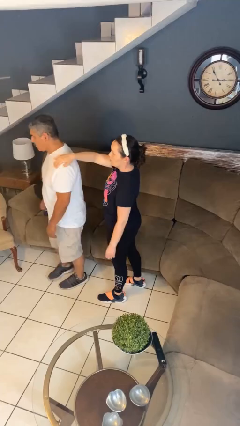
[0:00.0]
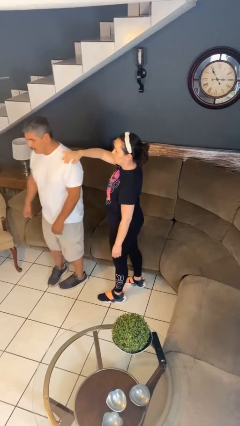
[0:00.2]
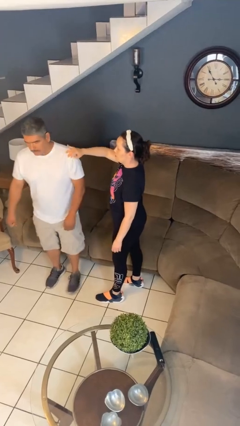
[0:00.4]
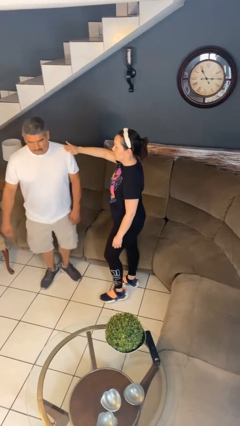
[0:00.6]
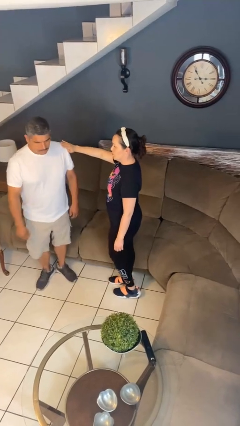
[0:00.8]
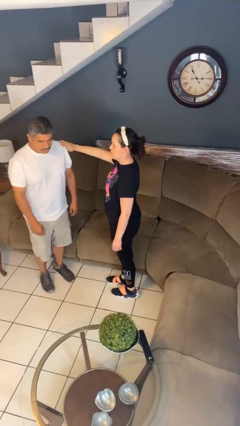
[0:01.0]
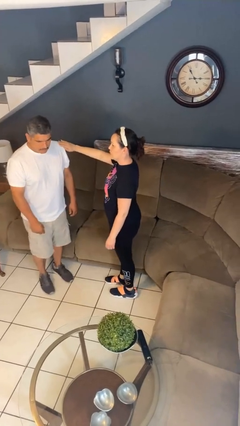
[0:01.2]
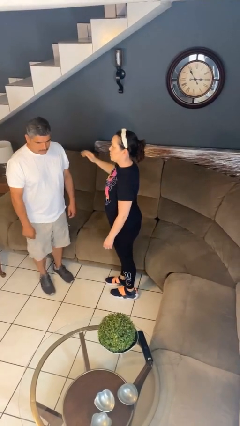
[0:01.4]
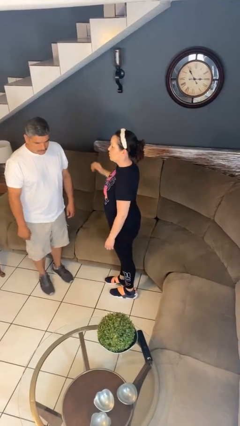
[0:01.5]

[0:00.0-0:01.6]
person spins person around

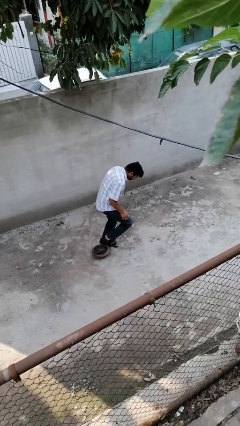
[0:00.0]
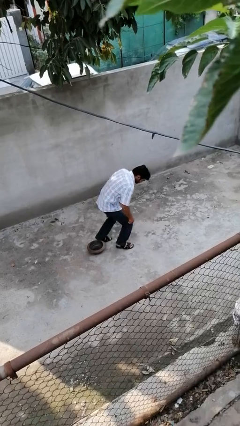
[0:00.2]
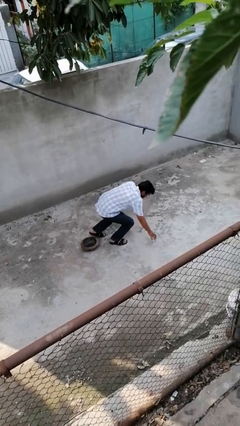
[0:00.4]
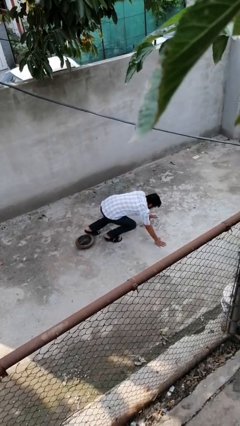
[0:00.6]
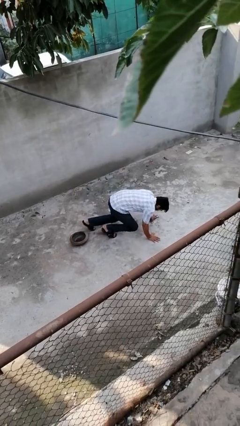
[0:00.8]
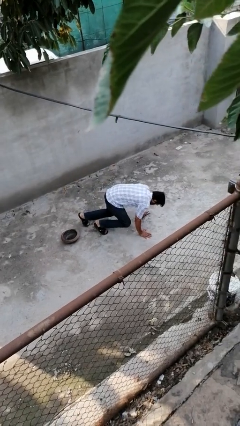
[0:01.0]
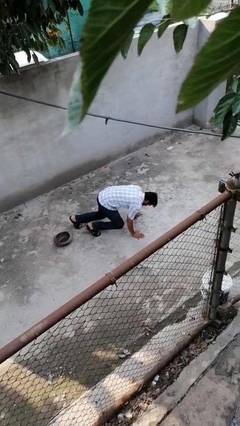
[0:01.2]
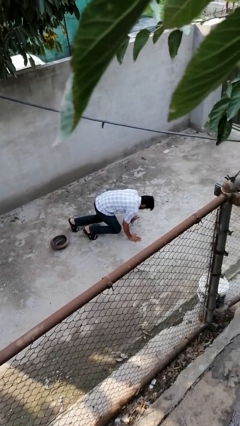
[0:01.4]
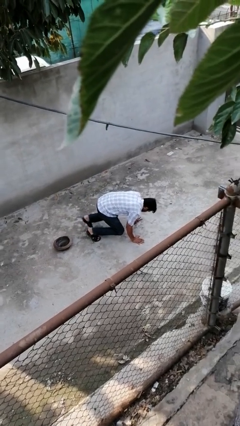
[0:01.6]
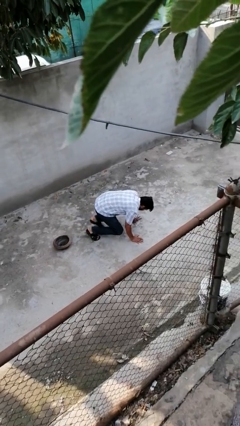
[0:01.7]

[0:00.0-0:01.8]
person lies down on floor

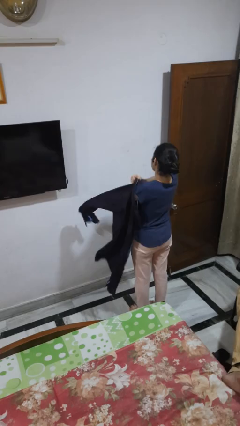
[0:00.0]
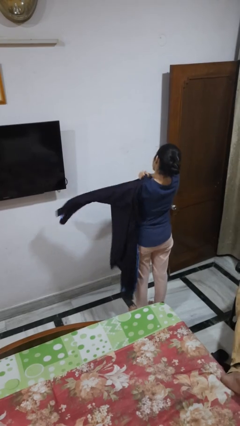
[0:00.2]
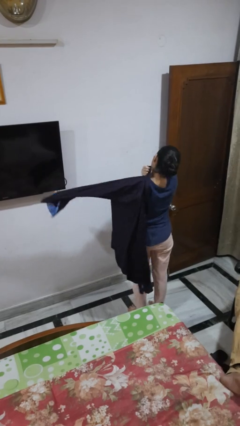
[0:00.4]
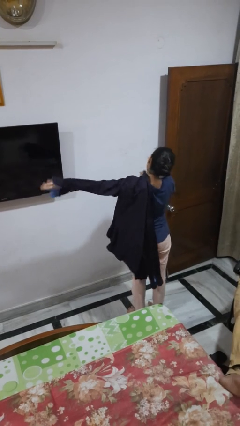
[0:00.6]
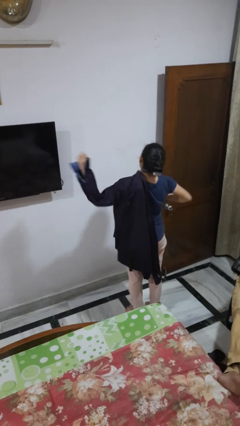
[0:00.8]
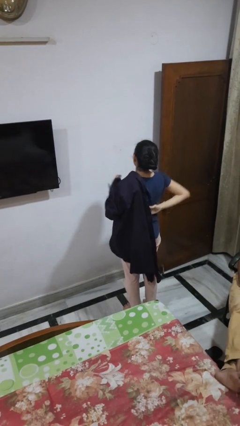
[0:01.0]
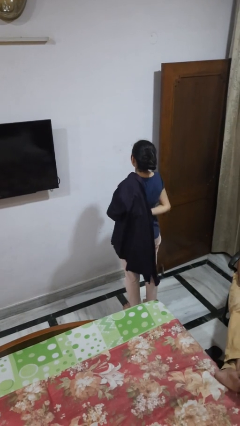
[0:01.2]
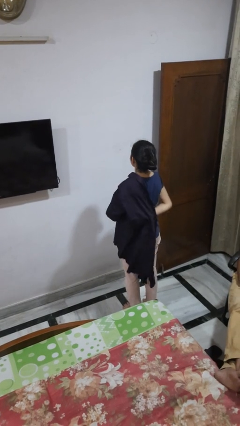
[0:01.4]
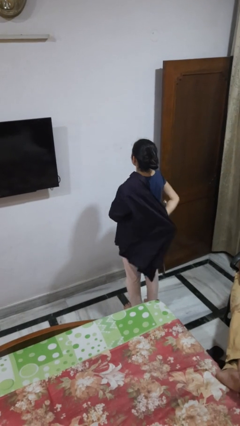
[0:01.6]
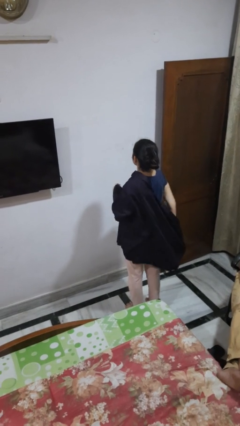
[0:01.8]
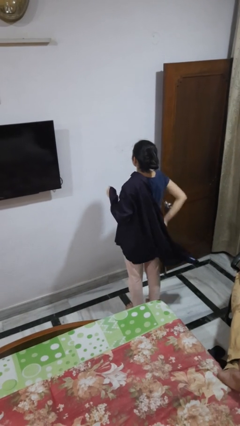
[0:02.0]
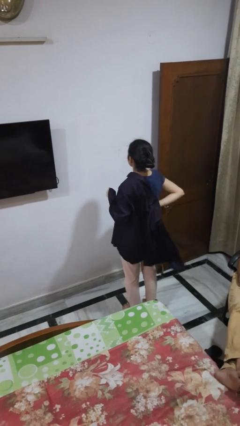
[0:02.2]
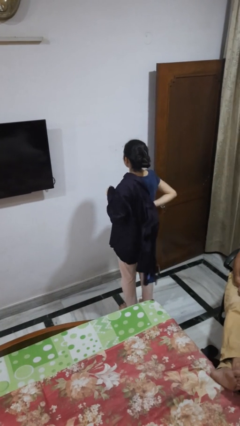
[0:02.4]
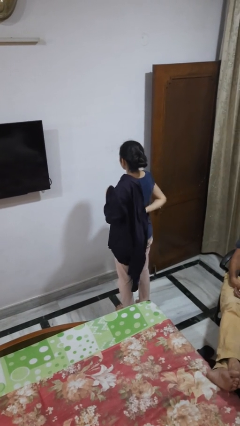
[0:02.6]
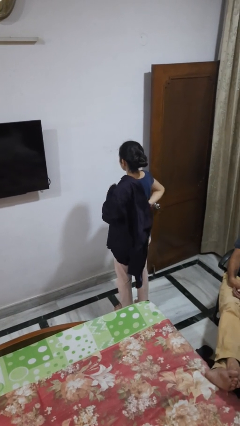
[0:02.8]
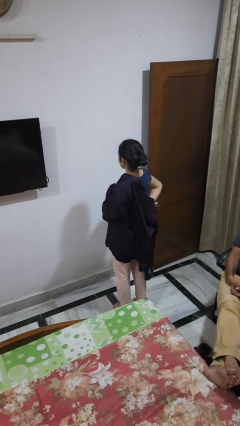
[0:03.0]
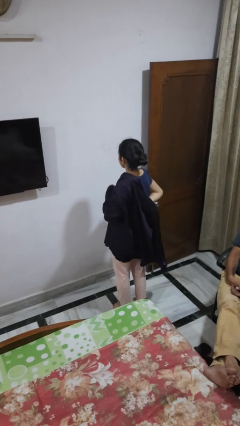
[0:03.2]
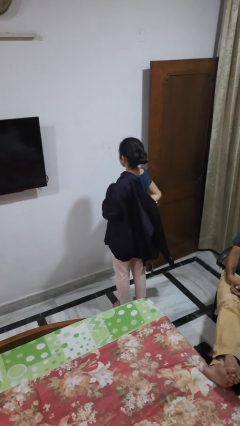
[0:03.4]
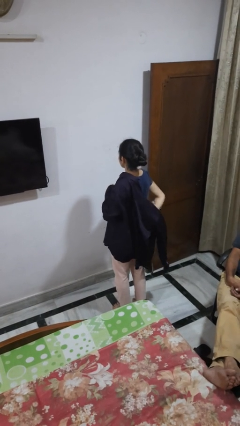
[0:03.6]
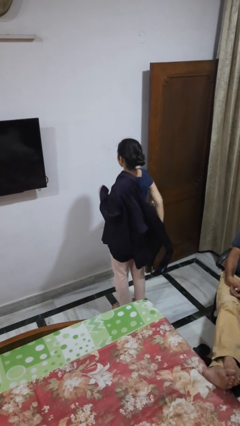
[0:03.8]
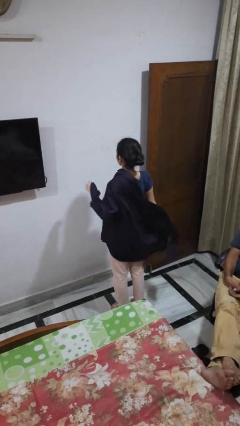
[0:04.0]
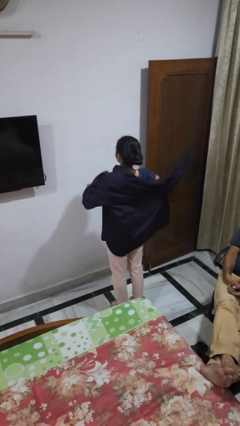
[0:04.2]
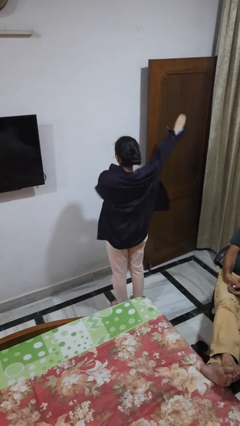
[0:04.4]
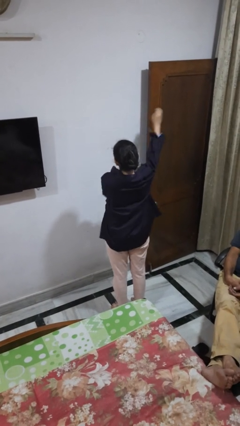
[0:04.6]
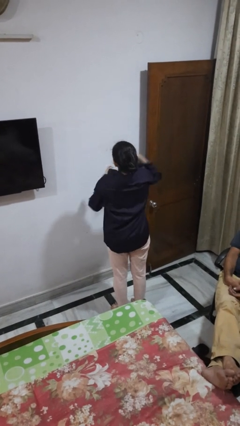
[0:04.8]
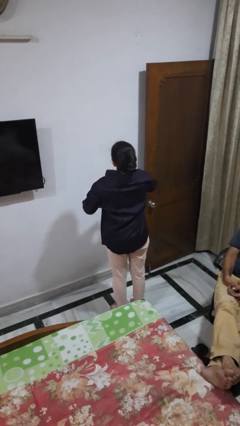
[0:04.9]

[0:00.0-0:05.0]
person puts on shirt

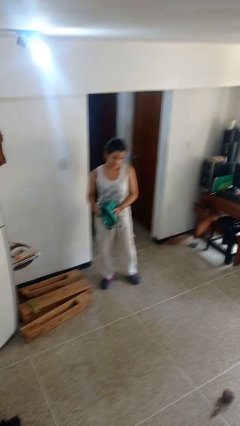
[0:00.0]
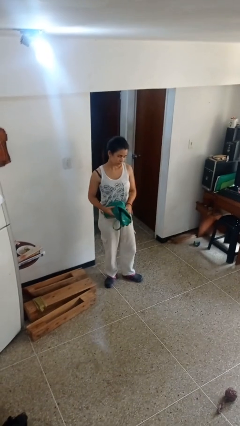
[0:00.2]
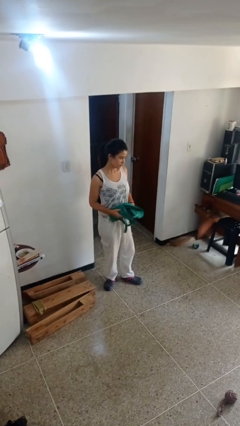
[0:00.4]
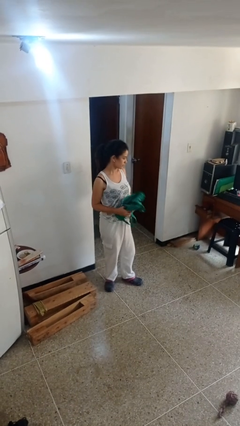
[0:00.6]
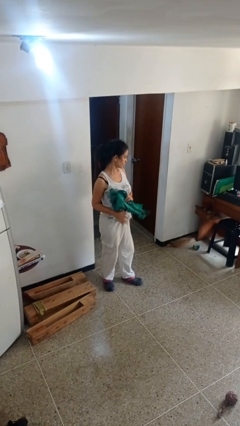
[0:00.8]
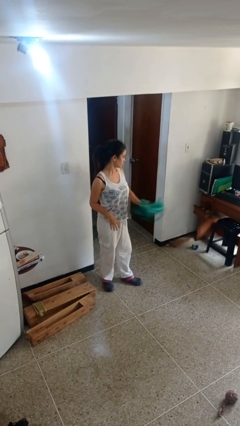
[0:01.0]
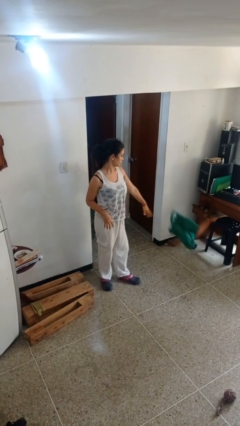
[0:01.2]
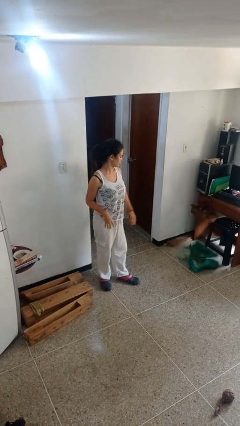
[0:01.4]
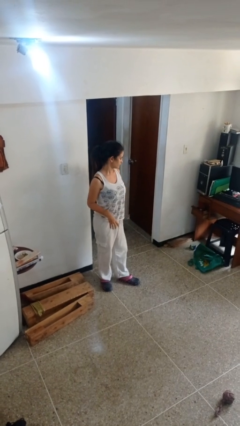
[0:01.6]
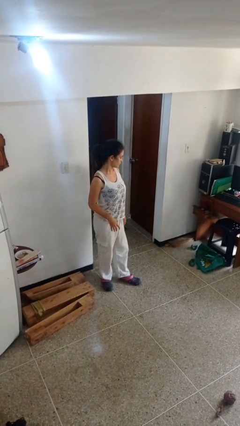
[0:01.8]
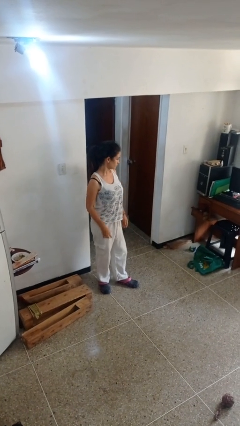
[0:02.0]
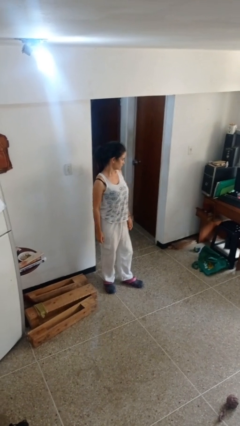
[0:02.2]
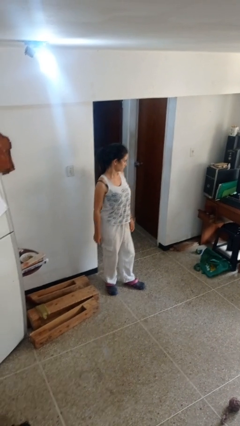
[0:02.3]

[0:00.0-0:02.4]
person throws object to ground

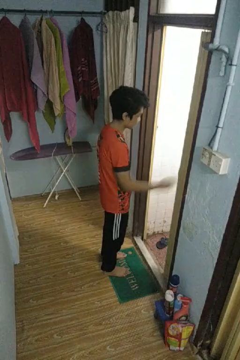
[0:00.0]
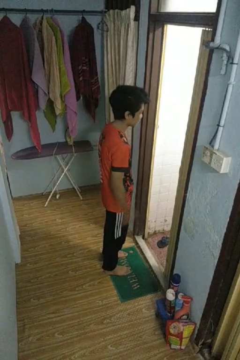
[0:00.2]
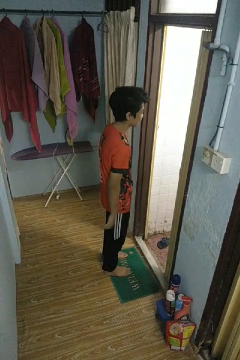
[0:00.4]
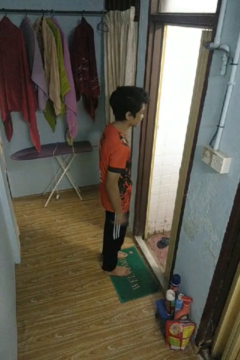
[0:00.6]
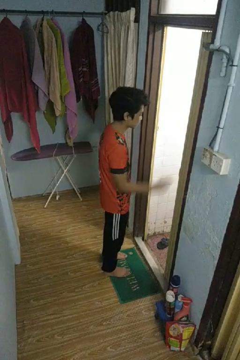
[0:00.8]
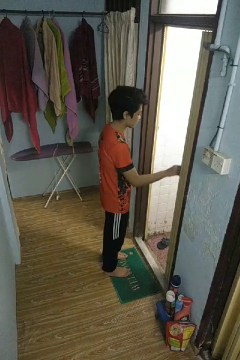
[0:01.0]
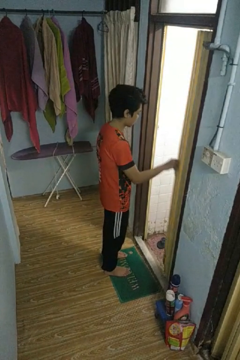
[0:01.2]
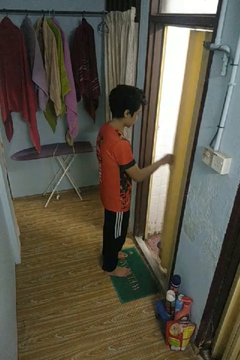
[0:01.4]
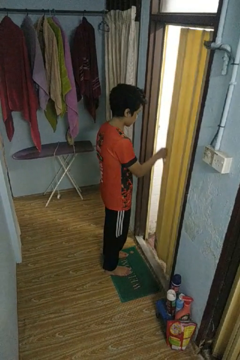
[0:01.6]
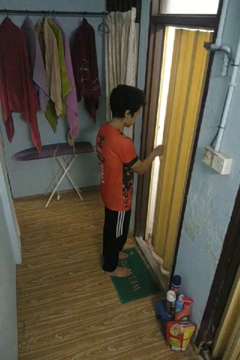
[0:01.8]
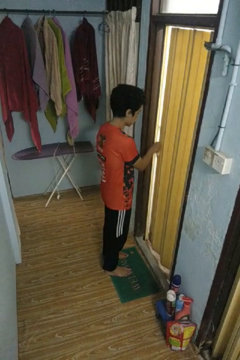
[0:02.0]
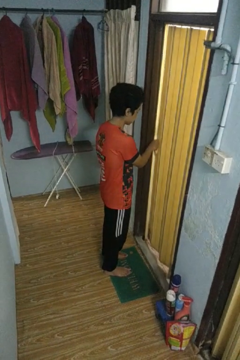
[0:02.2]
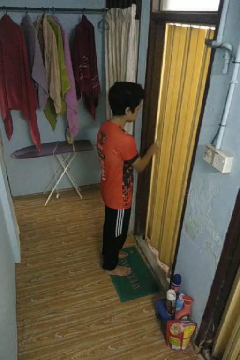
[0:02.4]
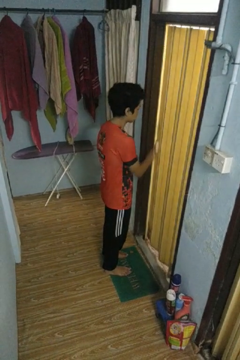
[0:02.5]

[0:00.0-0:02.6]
person closes sliding door

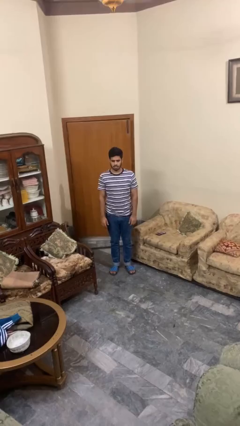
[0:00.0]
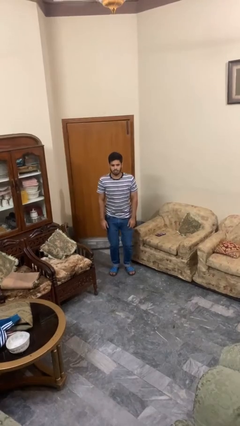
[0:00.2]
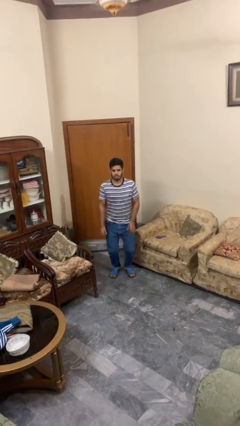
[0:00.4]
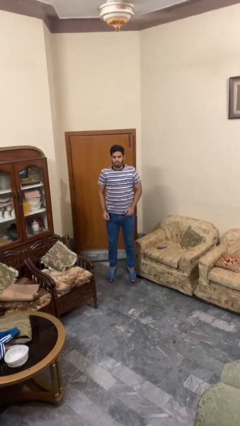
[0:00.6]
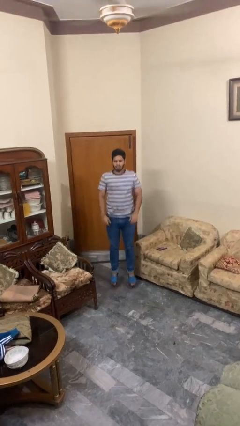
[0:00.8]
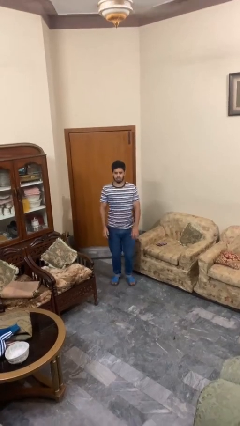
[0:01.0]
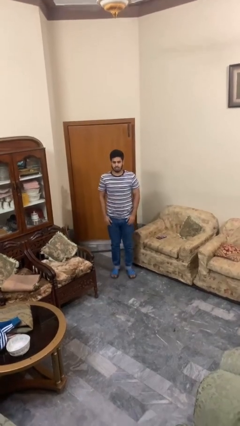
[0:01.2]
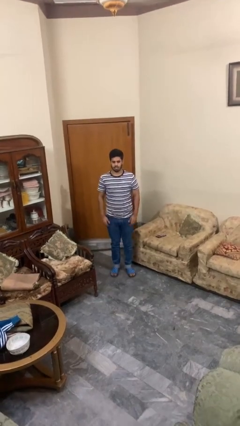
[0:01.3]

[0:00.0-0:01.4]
person jumps

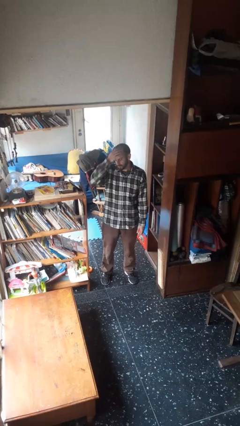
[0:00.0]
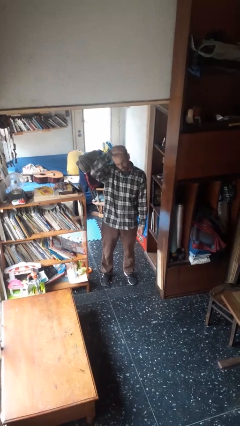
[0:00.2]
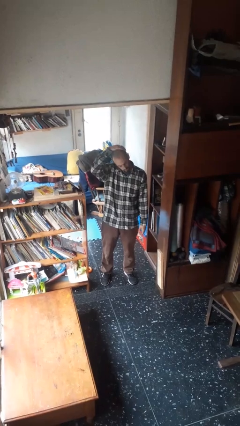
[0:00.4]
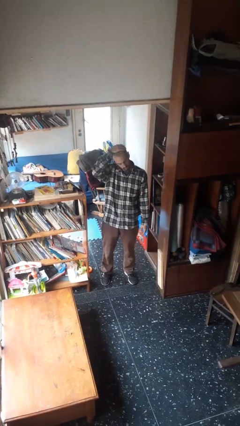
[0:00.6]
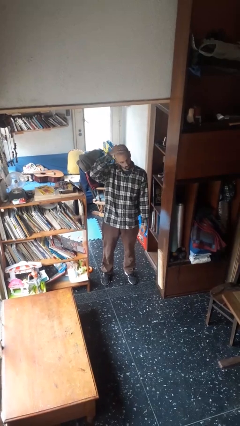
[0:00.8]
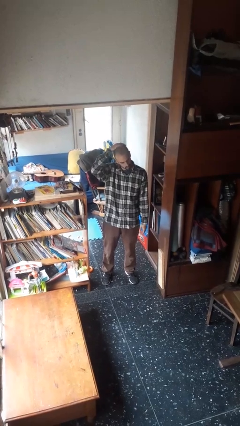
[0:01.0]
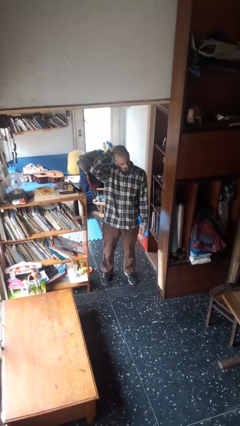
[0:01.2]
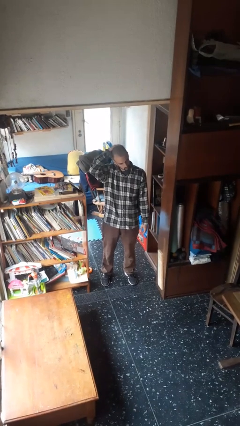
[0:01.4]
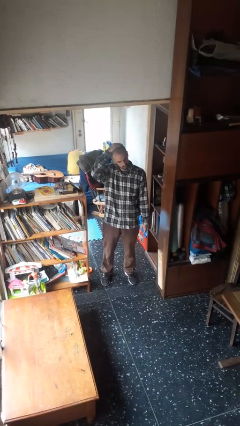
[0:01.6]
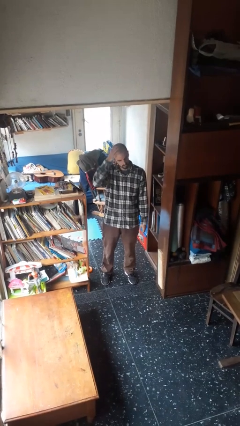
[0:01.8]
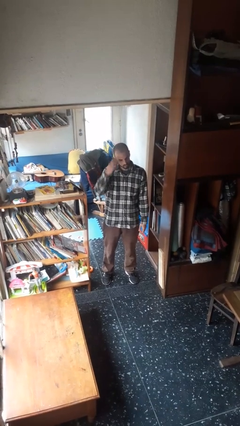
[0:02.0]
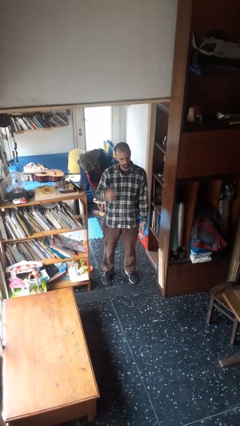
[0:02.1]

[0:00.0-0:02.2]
person pats head

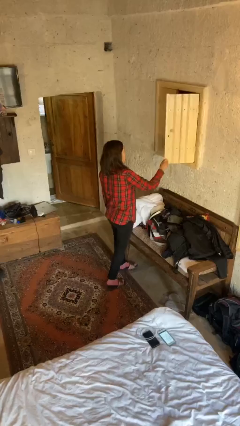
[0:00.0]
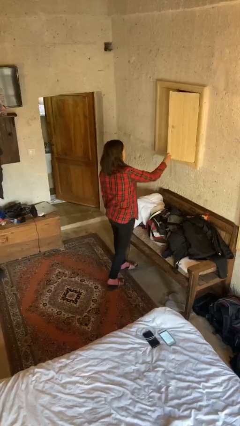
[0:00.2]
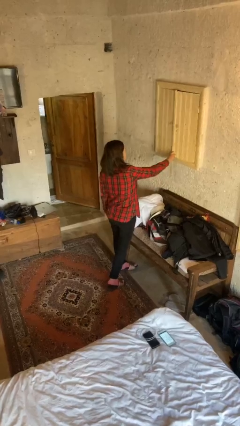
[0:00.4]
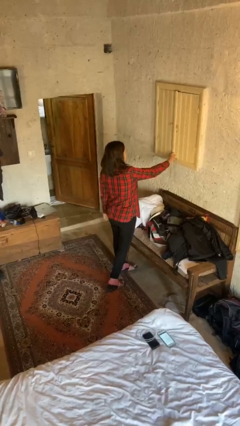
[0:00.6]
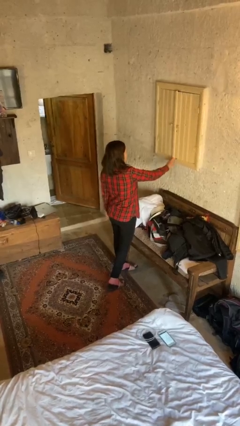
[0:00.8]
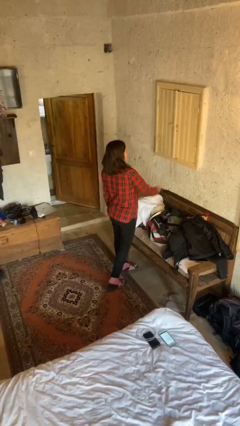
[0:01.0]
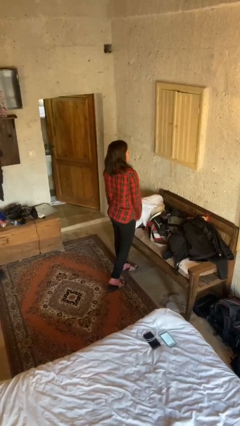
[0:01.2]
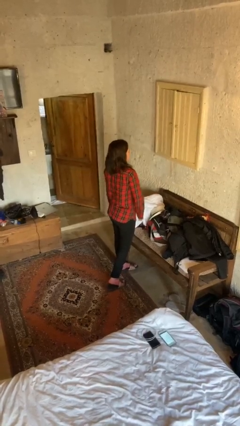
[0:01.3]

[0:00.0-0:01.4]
person closes closet door
